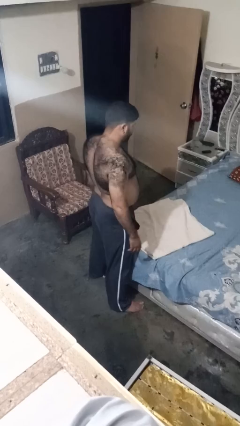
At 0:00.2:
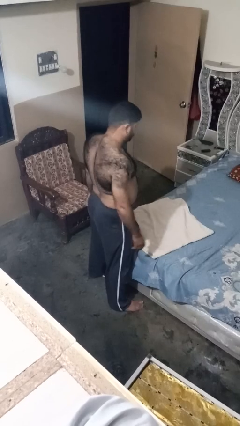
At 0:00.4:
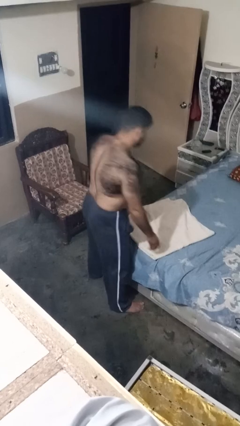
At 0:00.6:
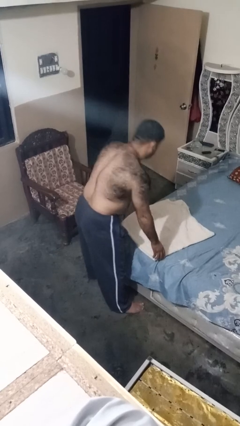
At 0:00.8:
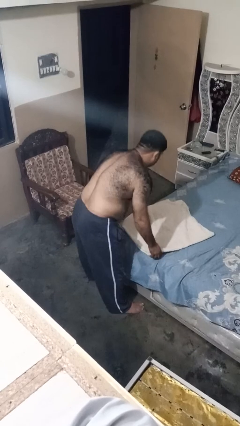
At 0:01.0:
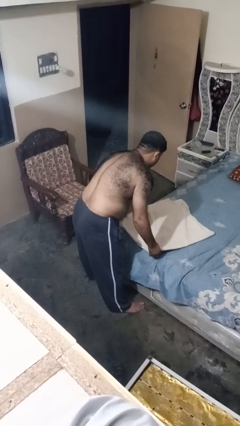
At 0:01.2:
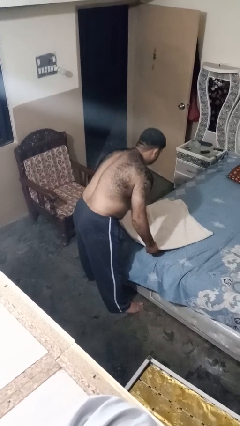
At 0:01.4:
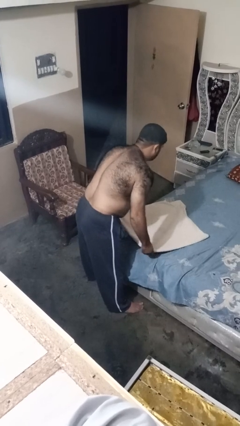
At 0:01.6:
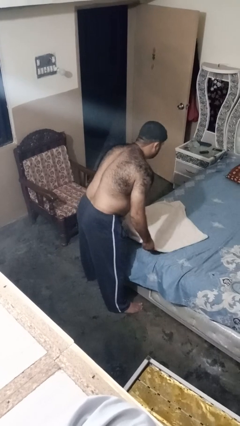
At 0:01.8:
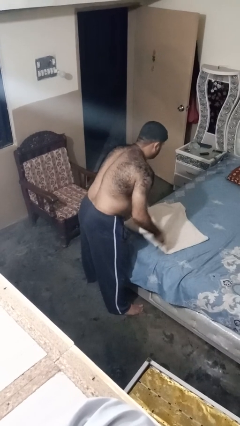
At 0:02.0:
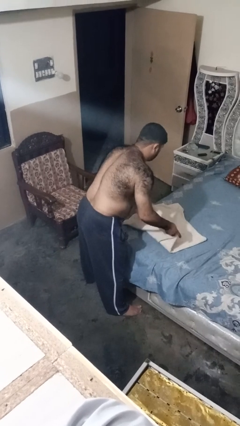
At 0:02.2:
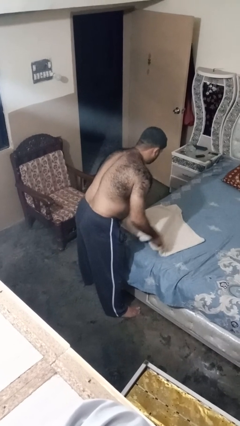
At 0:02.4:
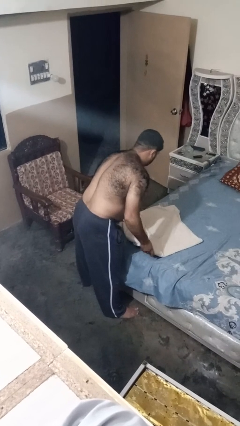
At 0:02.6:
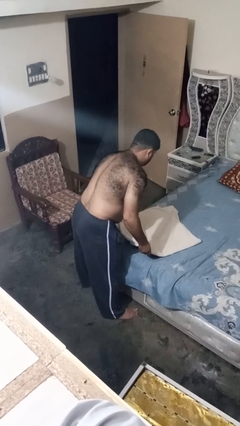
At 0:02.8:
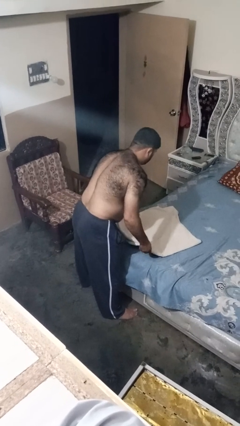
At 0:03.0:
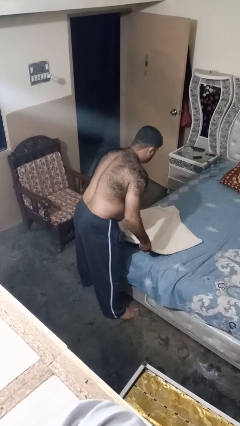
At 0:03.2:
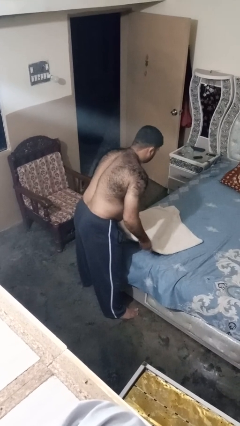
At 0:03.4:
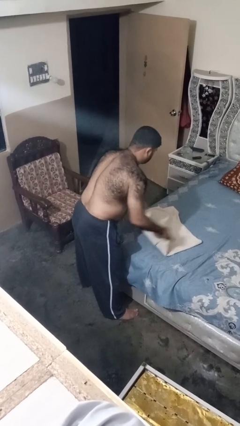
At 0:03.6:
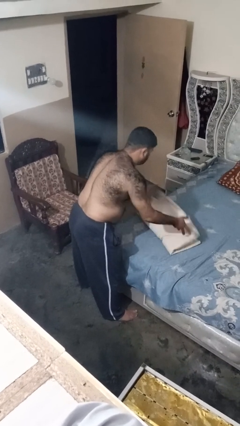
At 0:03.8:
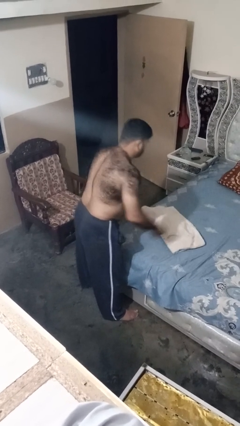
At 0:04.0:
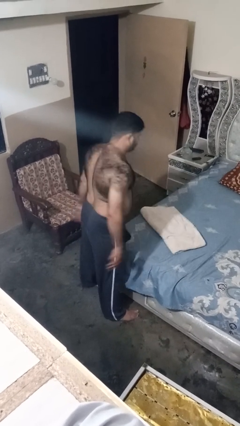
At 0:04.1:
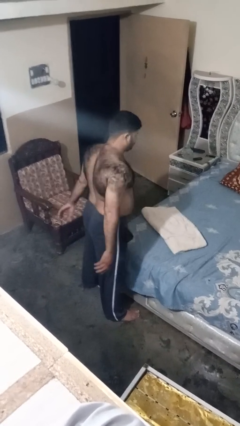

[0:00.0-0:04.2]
person folds towel

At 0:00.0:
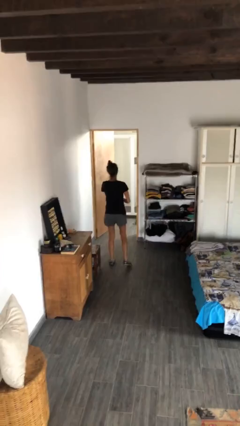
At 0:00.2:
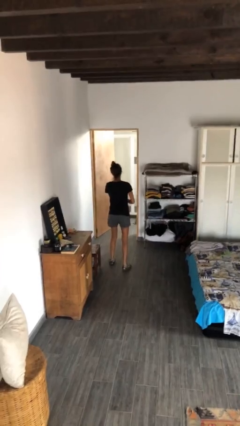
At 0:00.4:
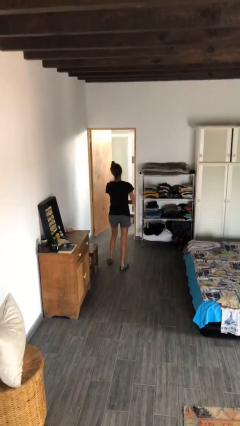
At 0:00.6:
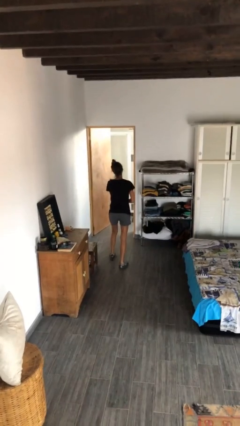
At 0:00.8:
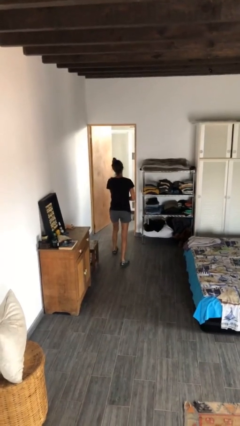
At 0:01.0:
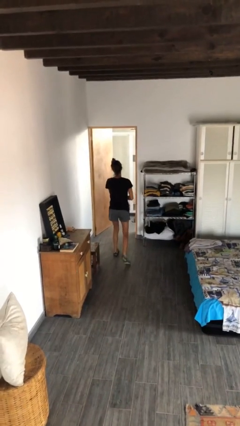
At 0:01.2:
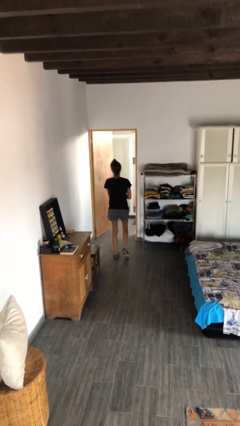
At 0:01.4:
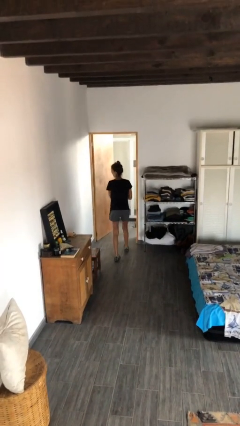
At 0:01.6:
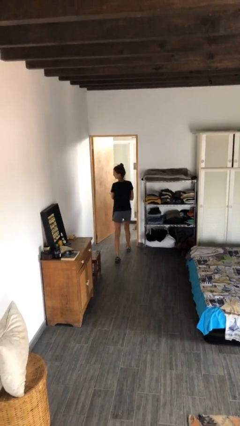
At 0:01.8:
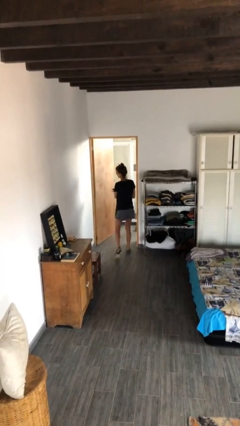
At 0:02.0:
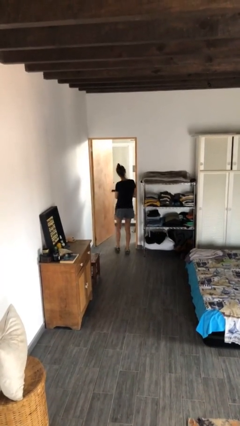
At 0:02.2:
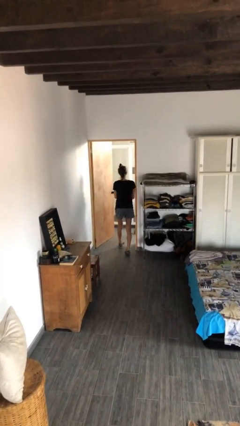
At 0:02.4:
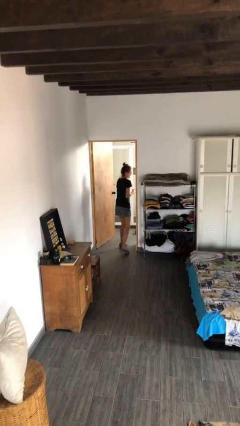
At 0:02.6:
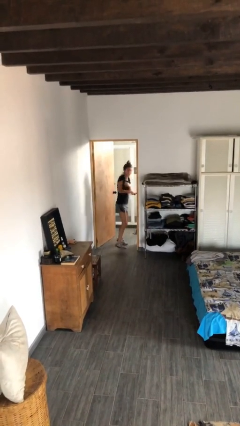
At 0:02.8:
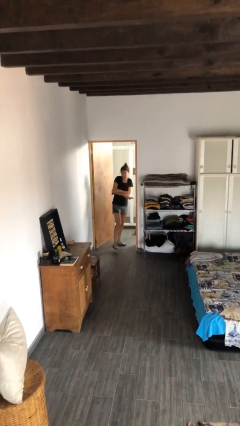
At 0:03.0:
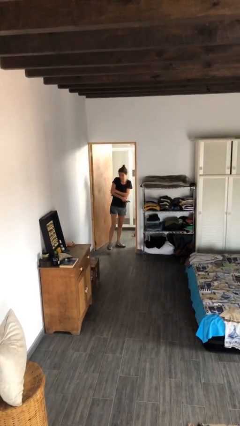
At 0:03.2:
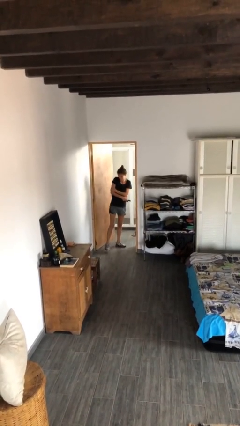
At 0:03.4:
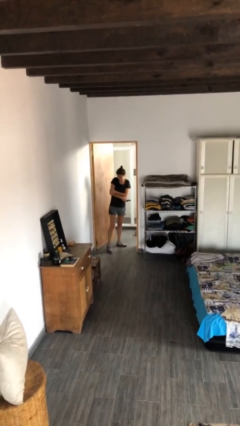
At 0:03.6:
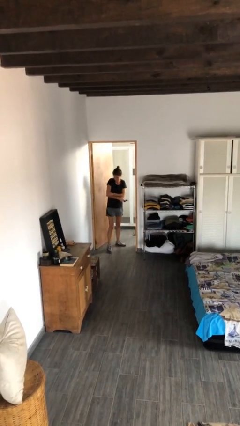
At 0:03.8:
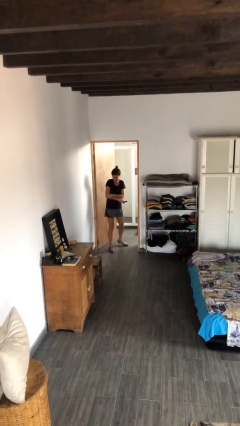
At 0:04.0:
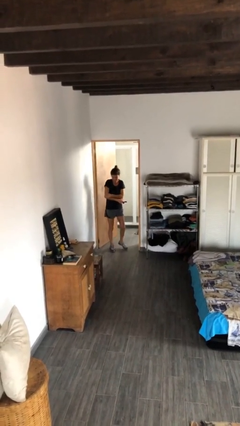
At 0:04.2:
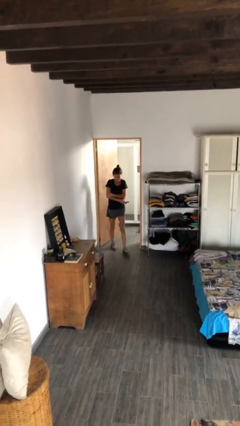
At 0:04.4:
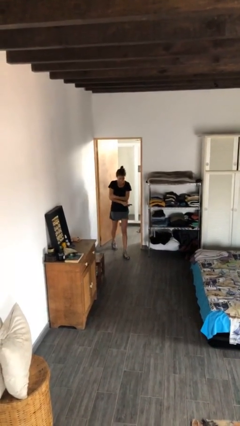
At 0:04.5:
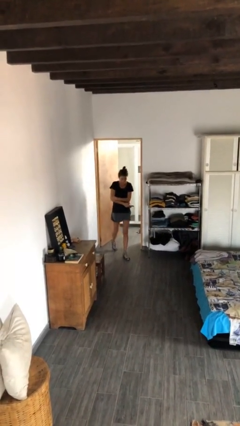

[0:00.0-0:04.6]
person bumps into wall

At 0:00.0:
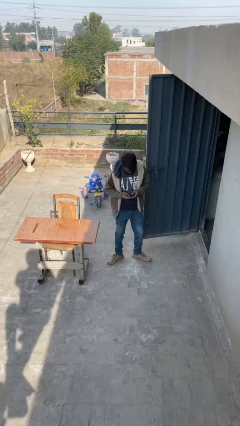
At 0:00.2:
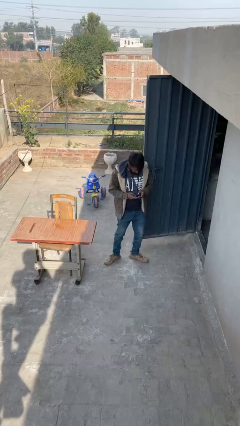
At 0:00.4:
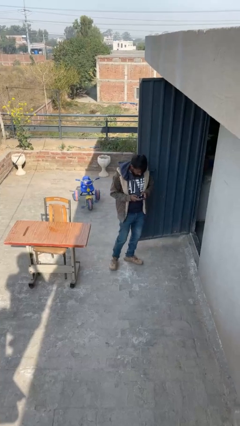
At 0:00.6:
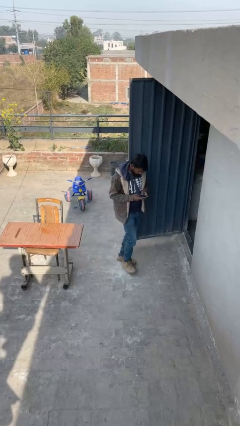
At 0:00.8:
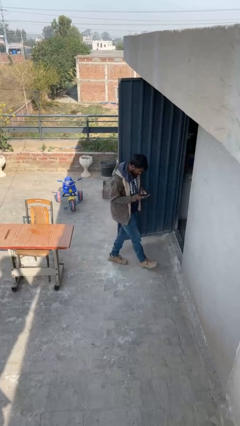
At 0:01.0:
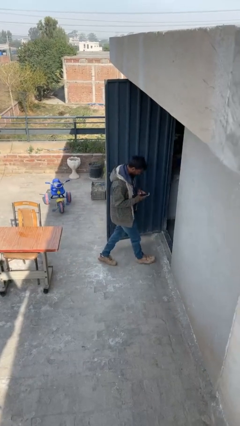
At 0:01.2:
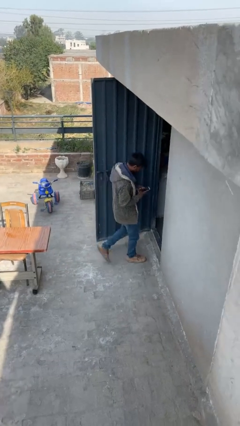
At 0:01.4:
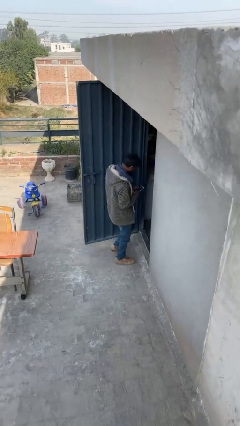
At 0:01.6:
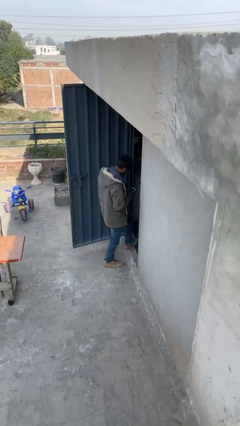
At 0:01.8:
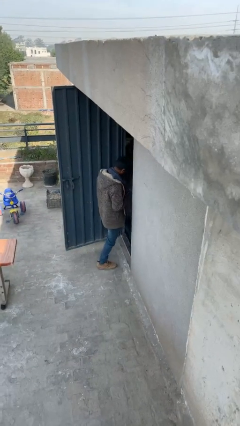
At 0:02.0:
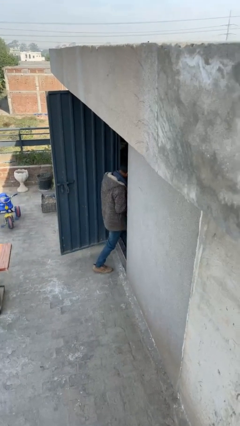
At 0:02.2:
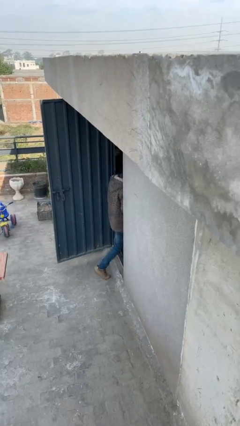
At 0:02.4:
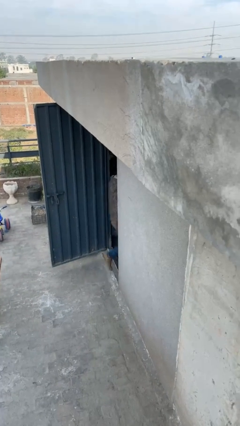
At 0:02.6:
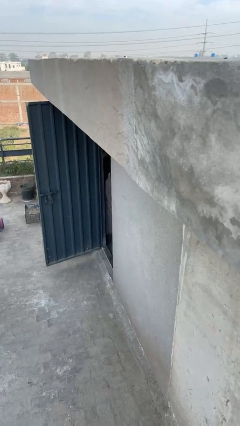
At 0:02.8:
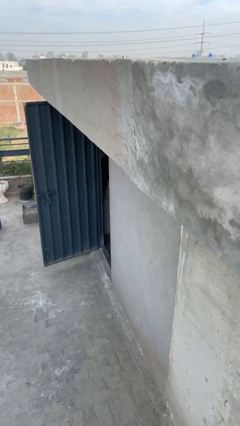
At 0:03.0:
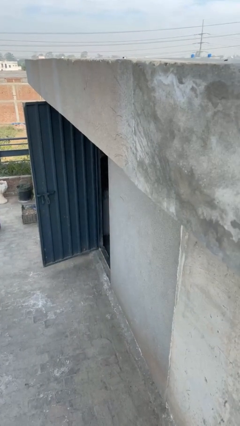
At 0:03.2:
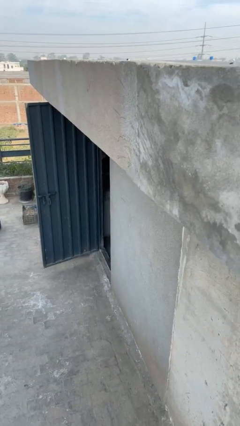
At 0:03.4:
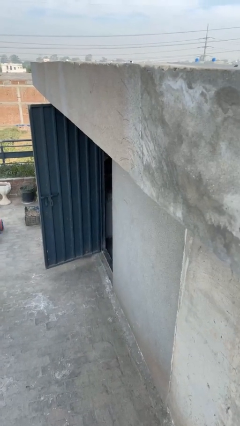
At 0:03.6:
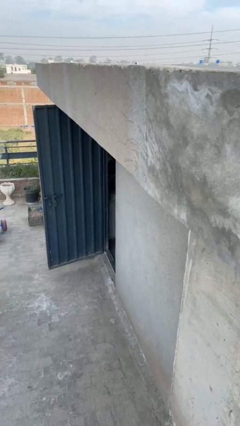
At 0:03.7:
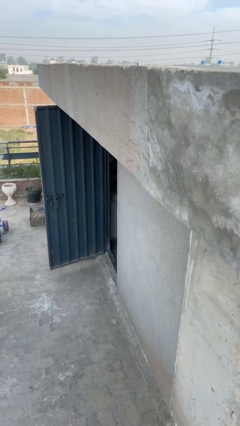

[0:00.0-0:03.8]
person exits scene through structure

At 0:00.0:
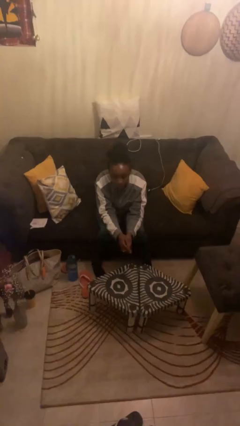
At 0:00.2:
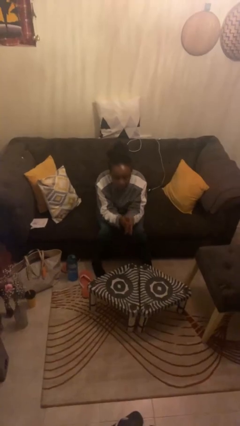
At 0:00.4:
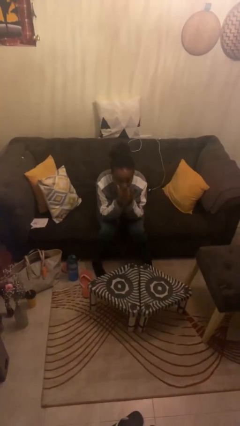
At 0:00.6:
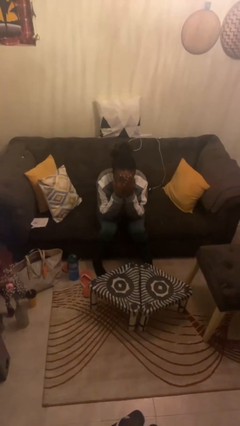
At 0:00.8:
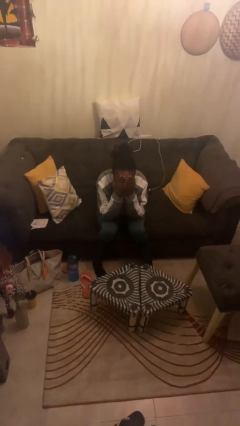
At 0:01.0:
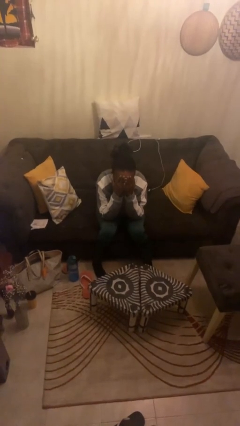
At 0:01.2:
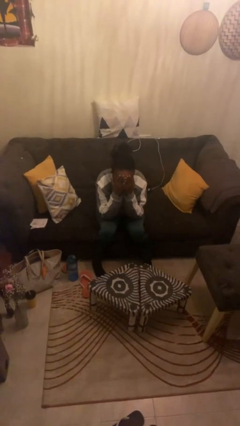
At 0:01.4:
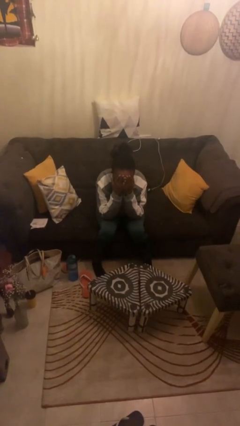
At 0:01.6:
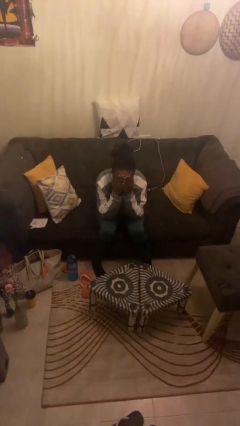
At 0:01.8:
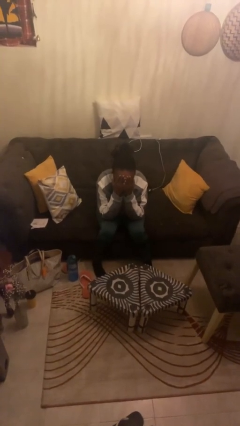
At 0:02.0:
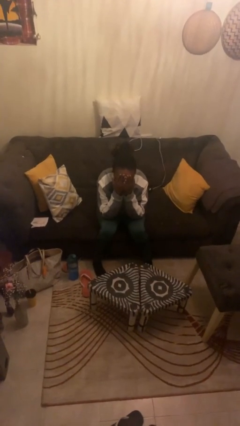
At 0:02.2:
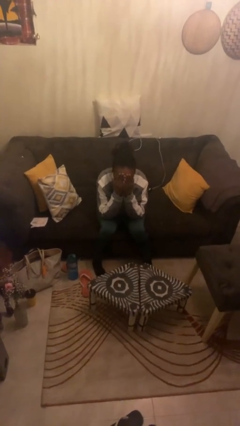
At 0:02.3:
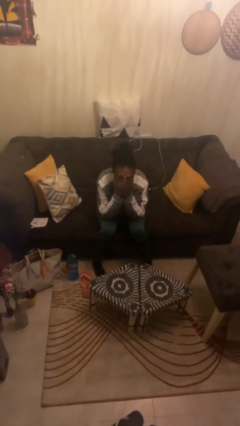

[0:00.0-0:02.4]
person covers face with hands

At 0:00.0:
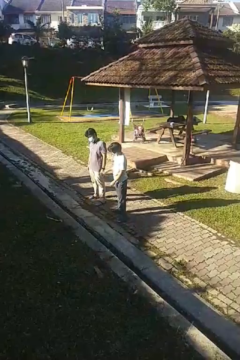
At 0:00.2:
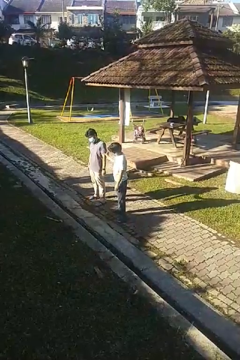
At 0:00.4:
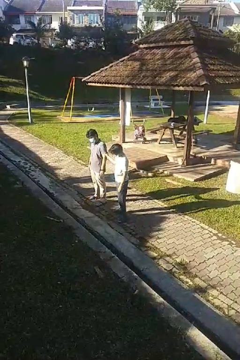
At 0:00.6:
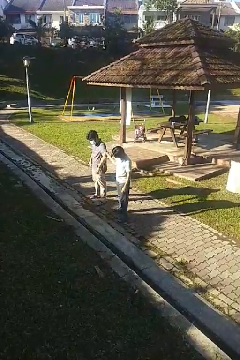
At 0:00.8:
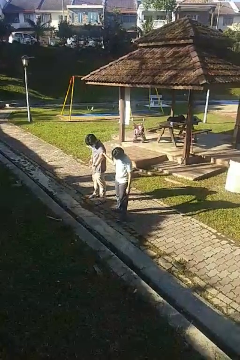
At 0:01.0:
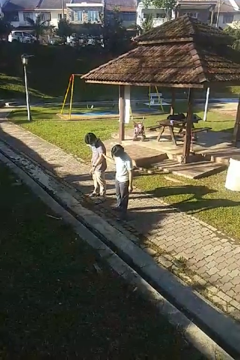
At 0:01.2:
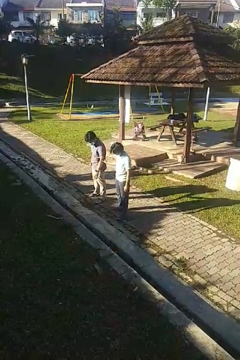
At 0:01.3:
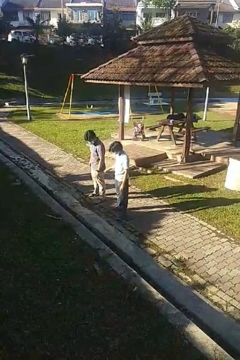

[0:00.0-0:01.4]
person grabs person by bicep

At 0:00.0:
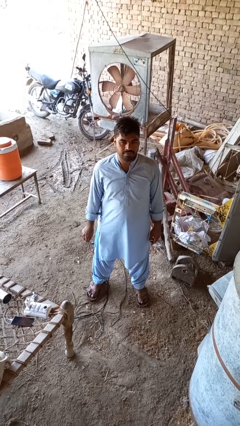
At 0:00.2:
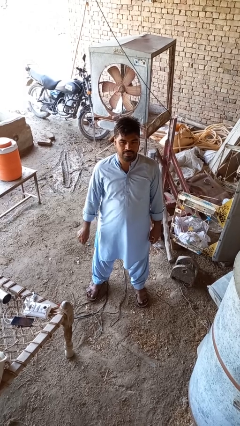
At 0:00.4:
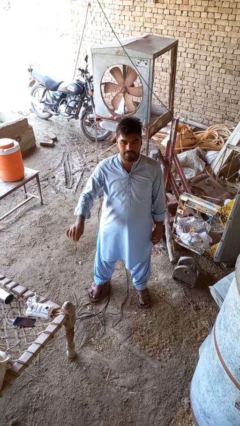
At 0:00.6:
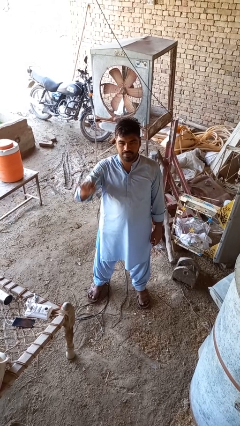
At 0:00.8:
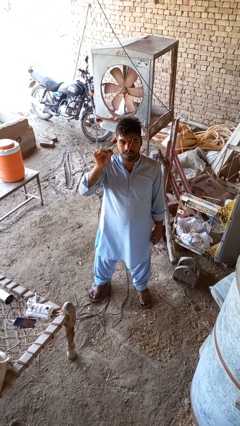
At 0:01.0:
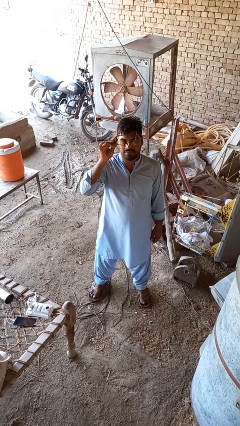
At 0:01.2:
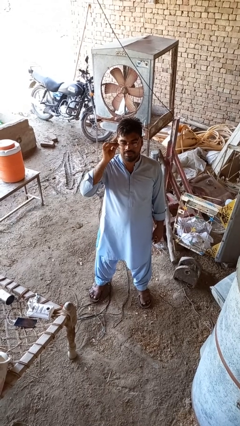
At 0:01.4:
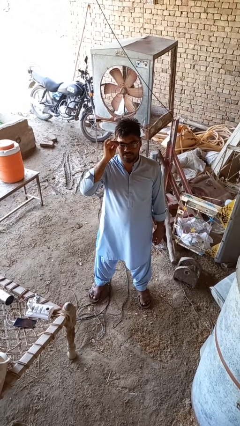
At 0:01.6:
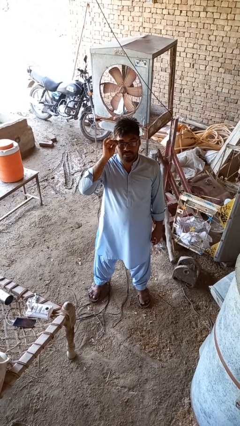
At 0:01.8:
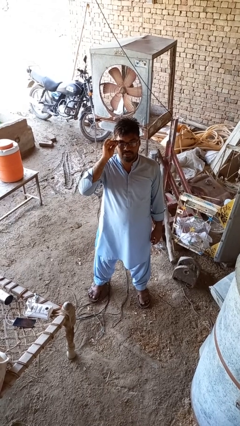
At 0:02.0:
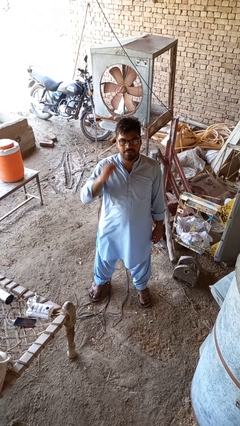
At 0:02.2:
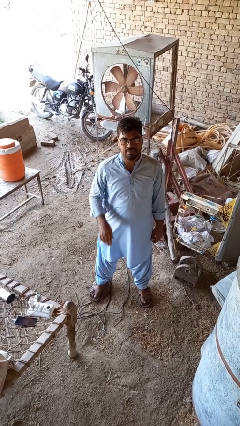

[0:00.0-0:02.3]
person puts on glasses
